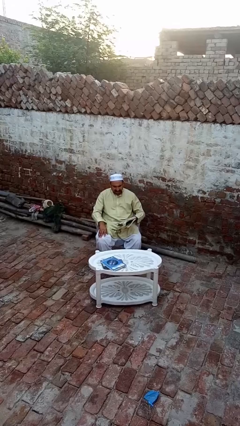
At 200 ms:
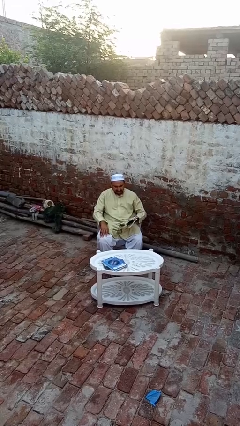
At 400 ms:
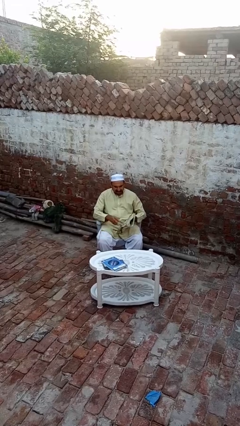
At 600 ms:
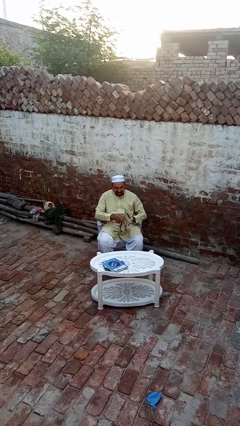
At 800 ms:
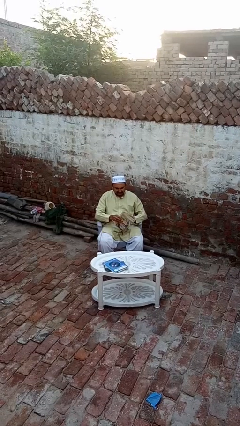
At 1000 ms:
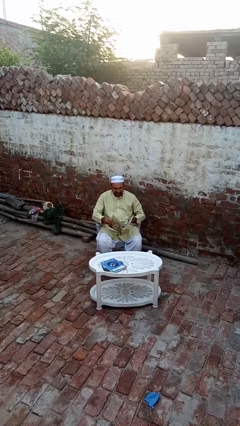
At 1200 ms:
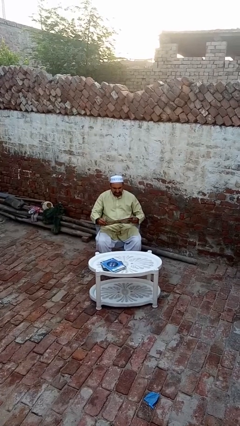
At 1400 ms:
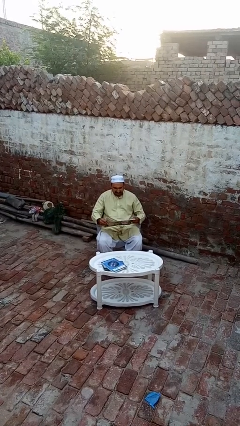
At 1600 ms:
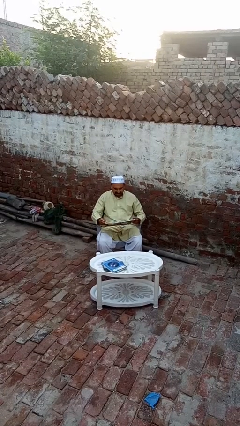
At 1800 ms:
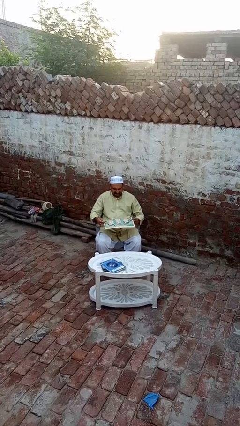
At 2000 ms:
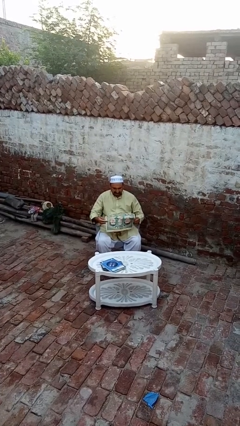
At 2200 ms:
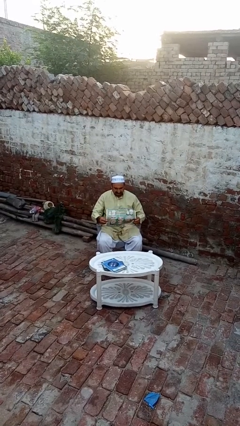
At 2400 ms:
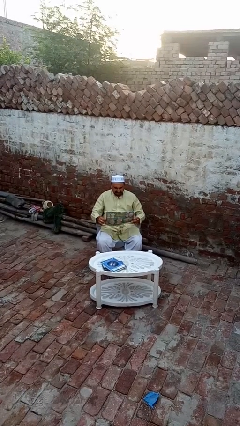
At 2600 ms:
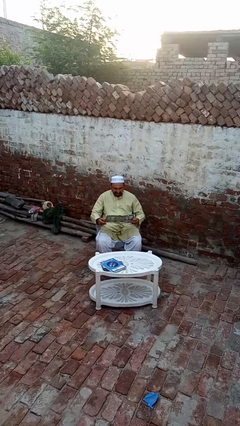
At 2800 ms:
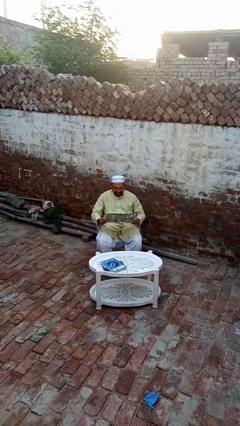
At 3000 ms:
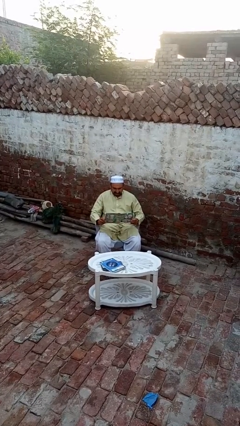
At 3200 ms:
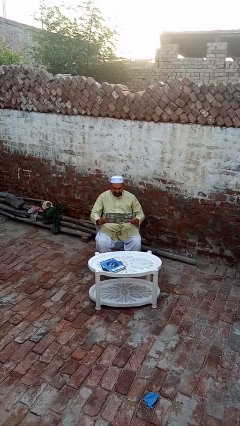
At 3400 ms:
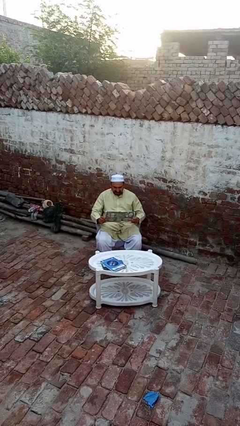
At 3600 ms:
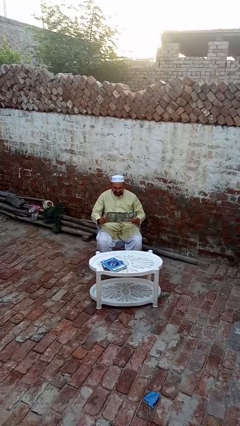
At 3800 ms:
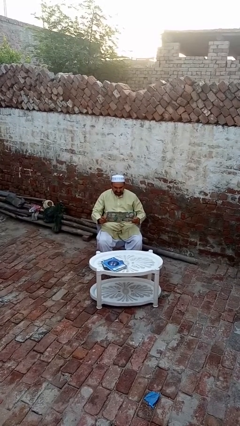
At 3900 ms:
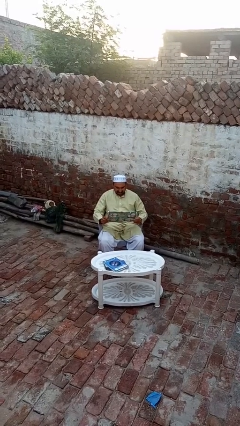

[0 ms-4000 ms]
person reads magazine

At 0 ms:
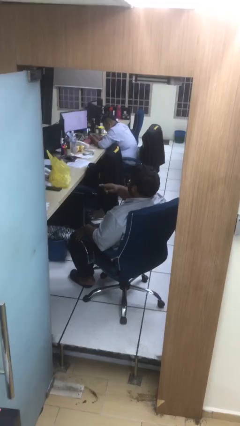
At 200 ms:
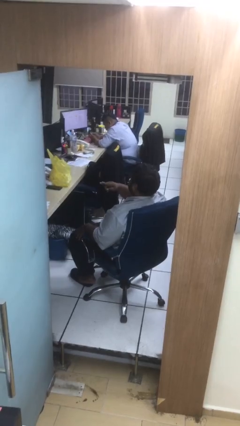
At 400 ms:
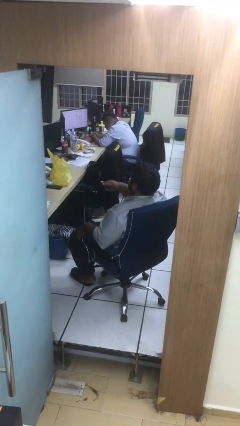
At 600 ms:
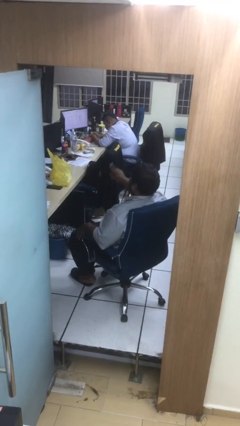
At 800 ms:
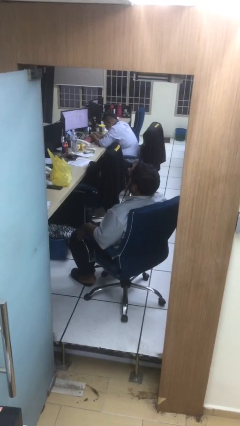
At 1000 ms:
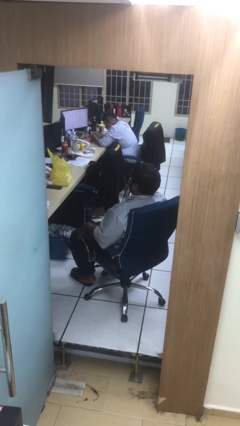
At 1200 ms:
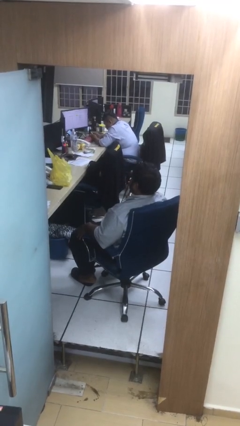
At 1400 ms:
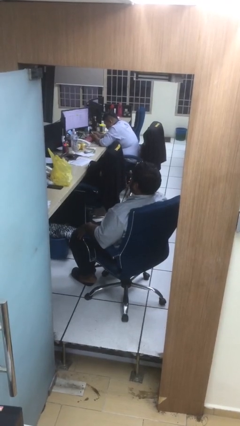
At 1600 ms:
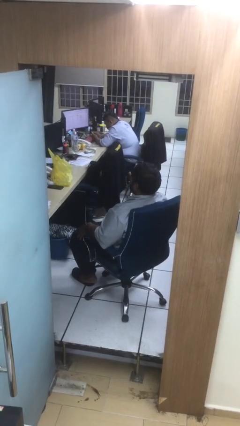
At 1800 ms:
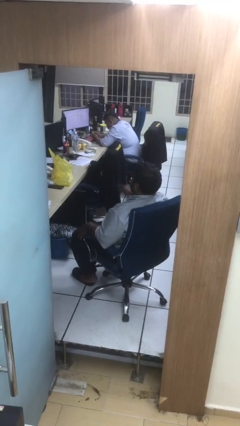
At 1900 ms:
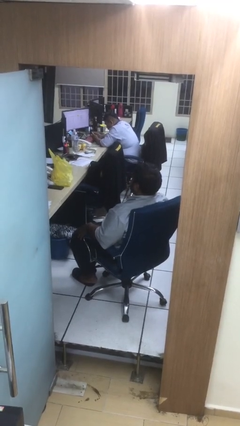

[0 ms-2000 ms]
person gestures swipe right

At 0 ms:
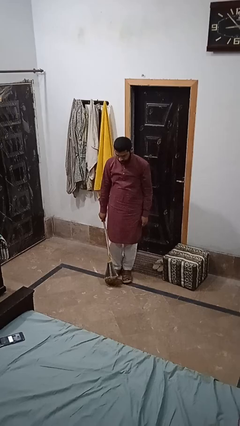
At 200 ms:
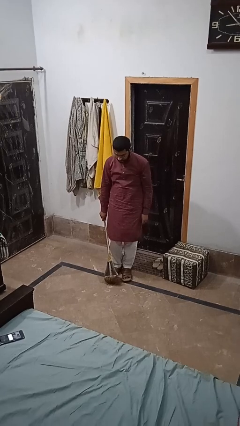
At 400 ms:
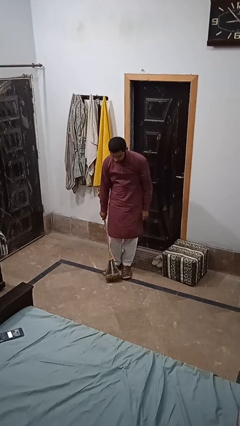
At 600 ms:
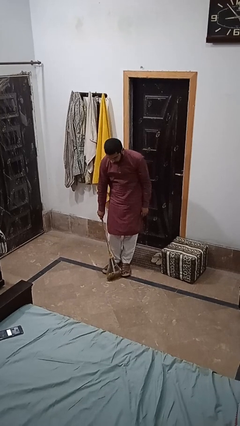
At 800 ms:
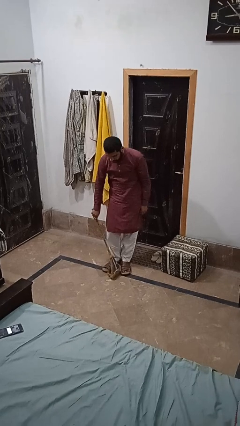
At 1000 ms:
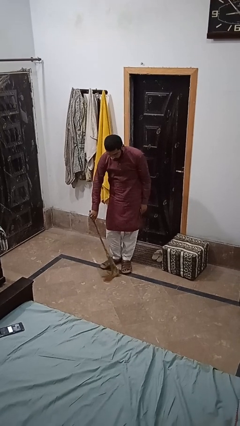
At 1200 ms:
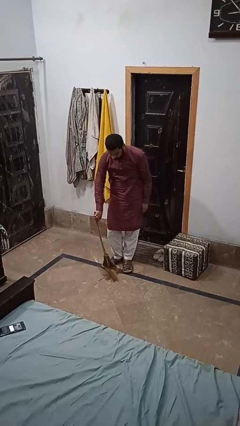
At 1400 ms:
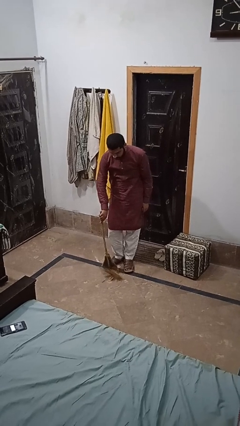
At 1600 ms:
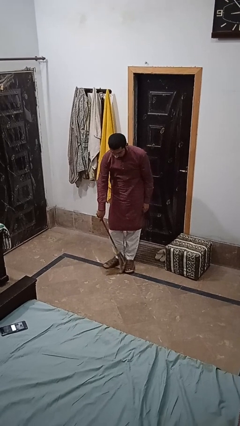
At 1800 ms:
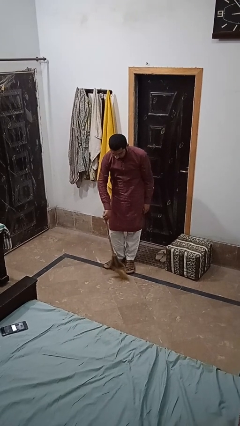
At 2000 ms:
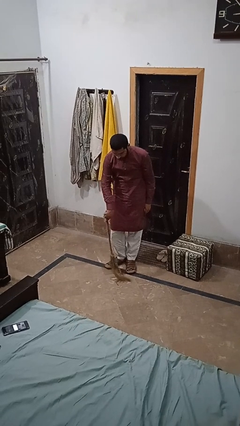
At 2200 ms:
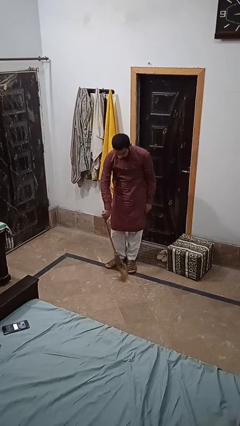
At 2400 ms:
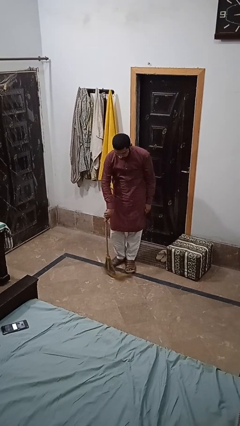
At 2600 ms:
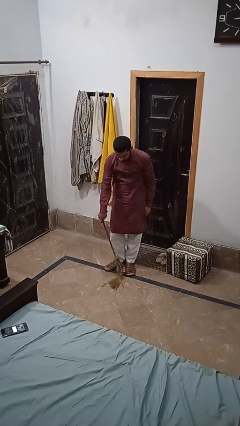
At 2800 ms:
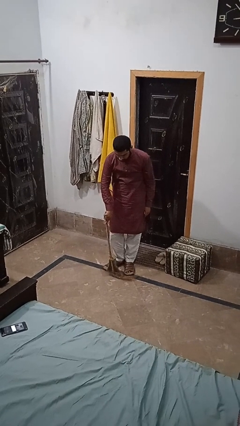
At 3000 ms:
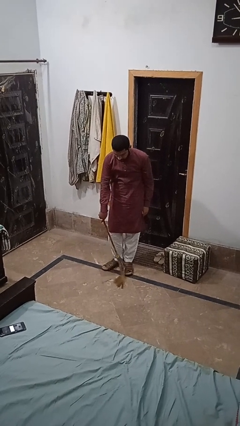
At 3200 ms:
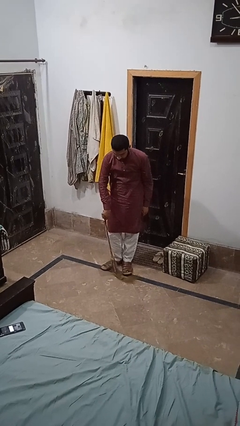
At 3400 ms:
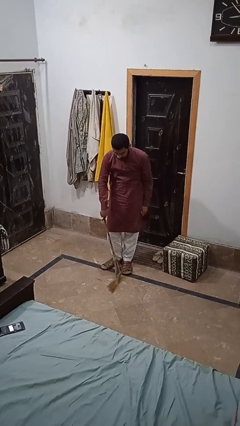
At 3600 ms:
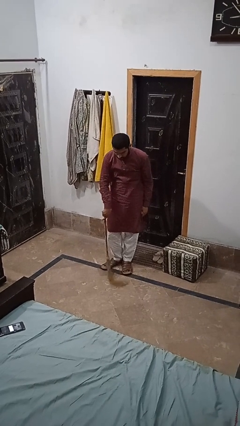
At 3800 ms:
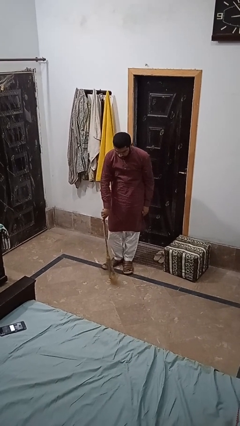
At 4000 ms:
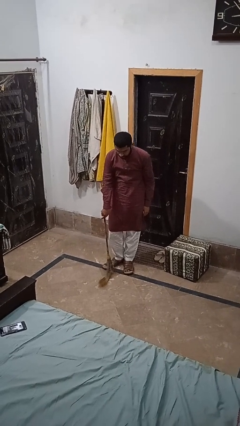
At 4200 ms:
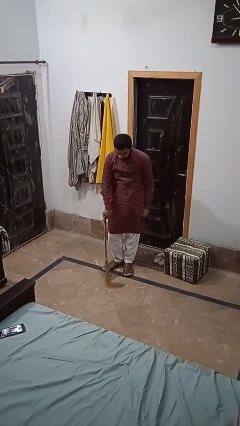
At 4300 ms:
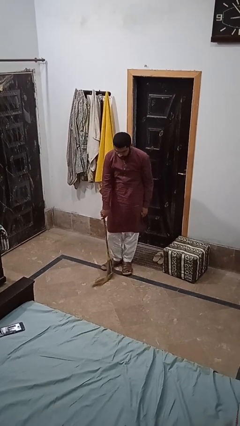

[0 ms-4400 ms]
person mops

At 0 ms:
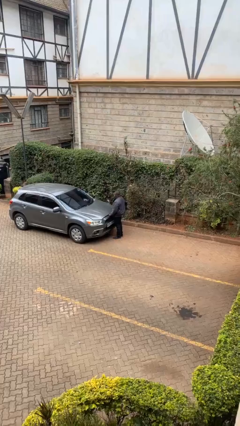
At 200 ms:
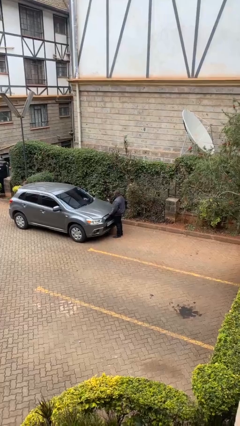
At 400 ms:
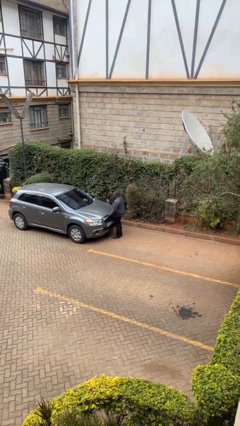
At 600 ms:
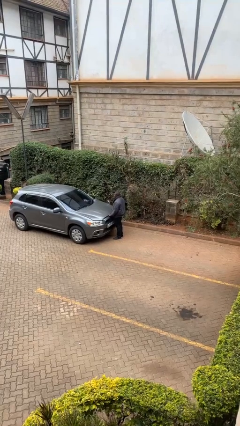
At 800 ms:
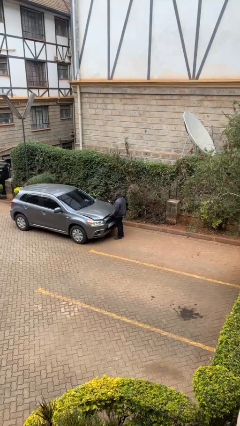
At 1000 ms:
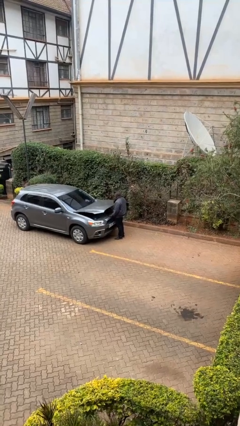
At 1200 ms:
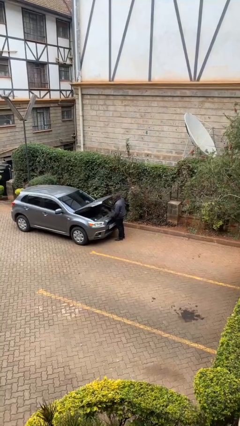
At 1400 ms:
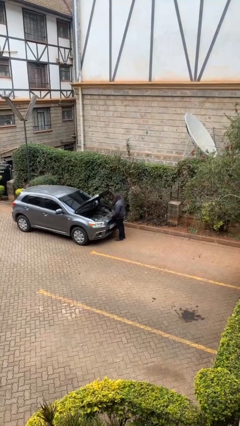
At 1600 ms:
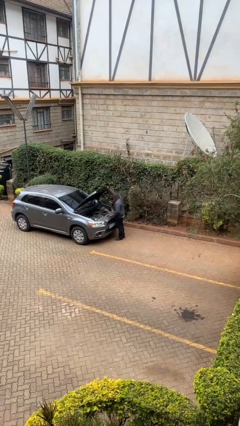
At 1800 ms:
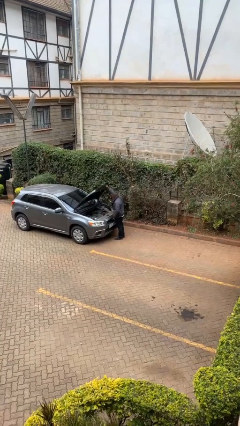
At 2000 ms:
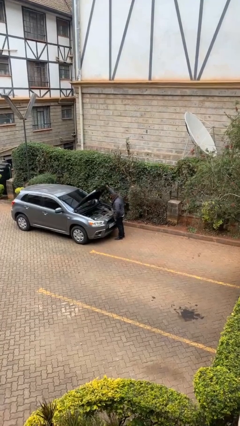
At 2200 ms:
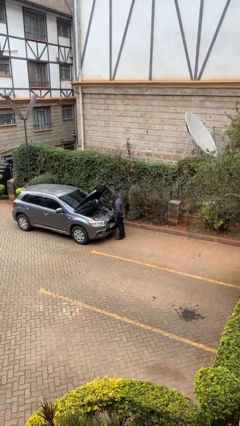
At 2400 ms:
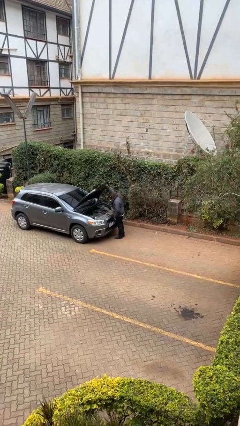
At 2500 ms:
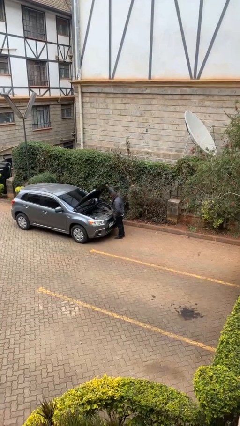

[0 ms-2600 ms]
person opens car hood

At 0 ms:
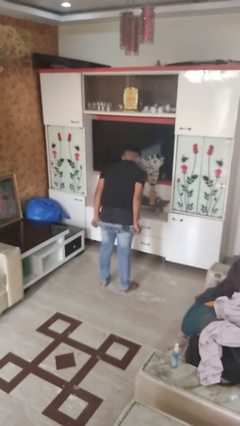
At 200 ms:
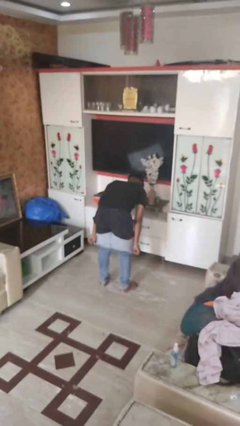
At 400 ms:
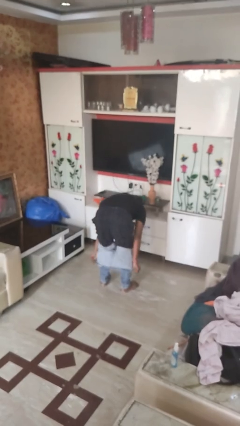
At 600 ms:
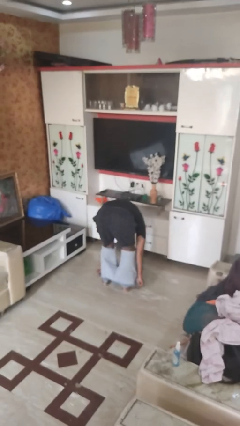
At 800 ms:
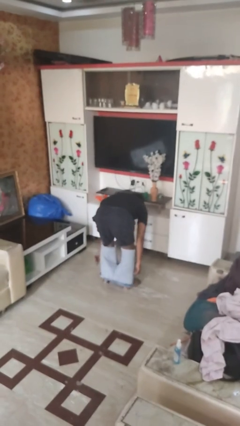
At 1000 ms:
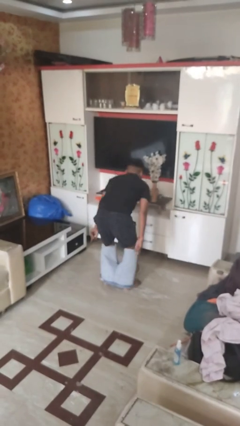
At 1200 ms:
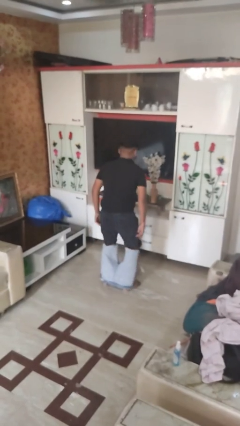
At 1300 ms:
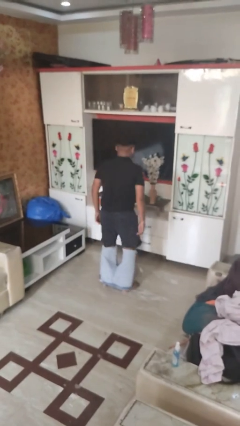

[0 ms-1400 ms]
person takes off pants

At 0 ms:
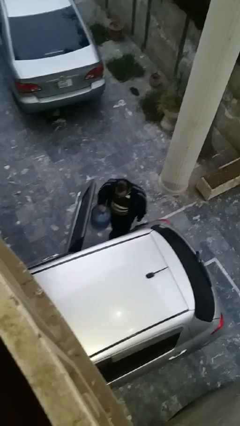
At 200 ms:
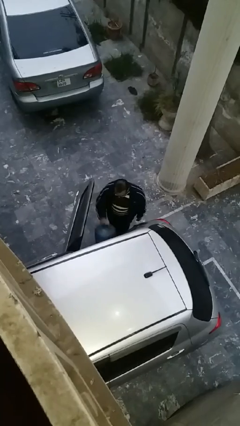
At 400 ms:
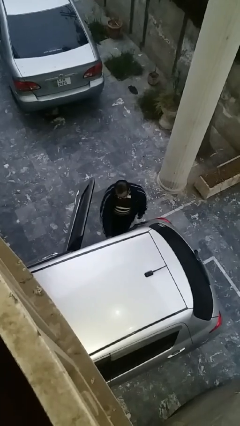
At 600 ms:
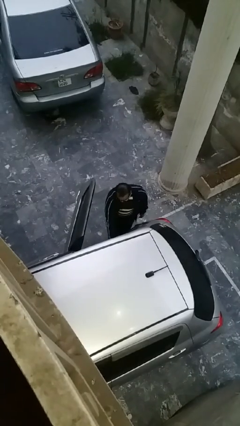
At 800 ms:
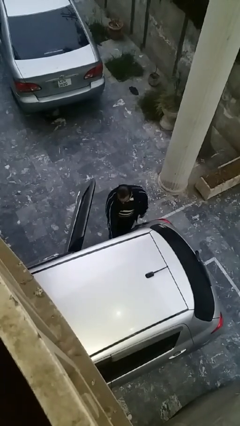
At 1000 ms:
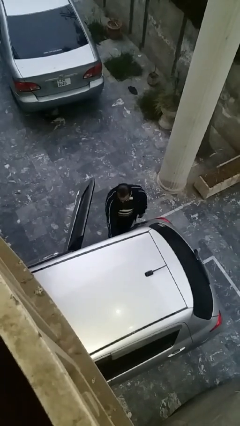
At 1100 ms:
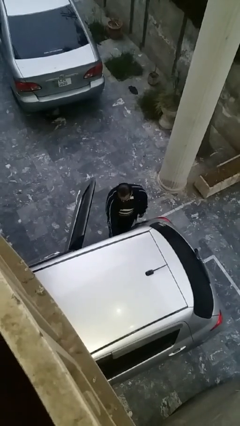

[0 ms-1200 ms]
person loads car

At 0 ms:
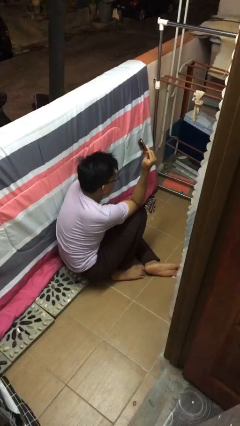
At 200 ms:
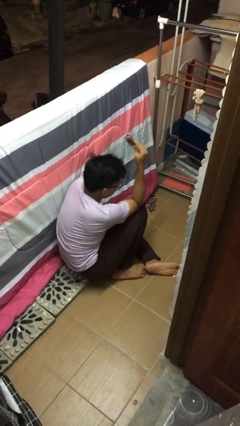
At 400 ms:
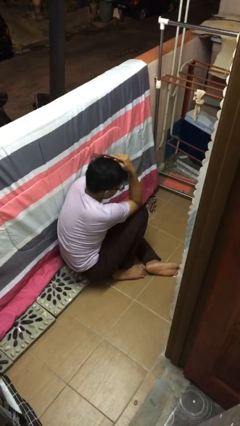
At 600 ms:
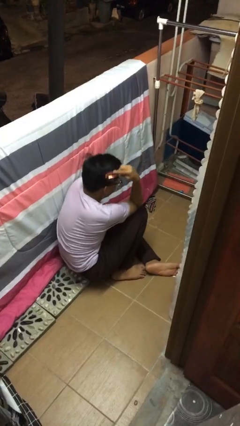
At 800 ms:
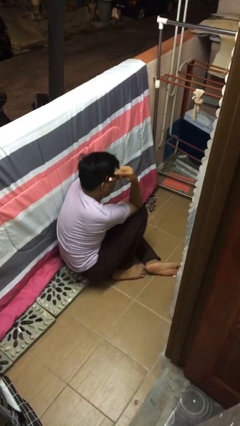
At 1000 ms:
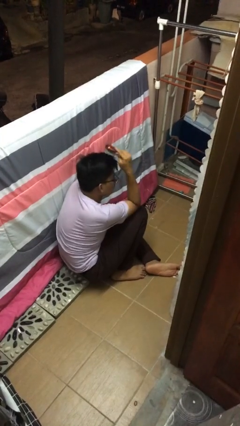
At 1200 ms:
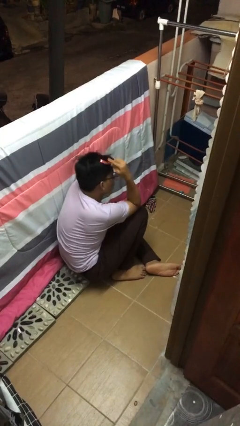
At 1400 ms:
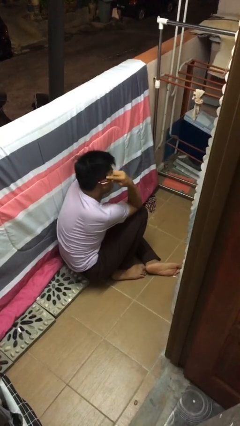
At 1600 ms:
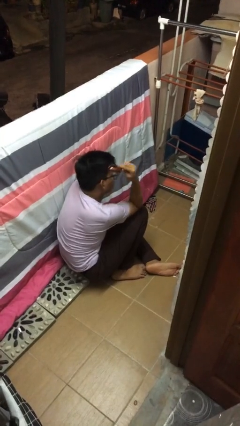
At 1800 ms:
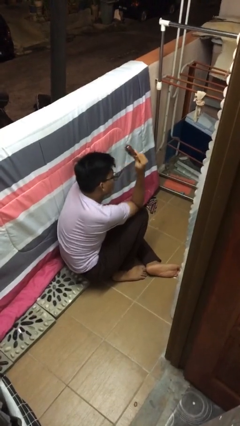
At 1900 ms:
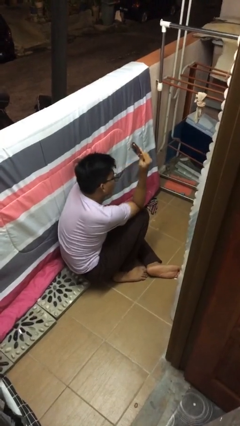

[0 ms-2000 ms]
person brushes hair
